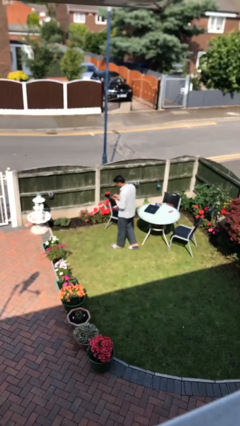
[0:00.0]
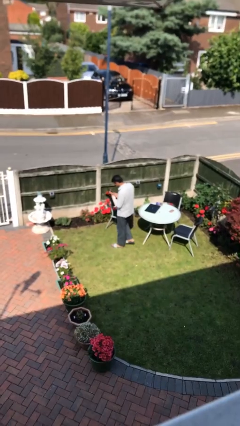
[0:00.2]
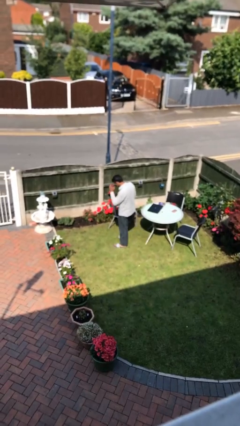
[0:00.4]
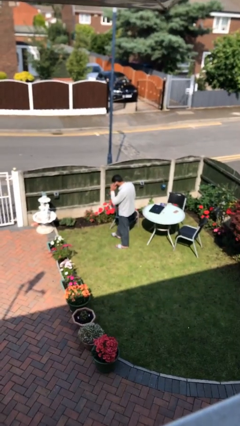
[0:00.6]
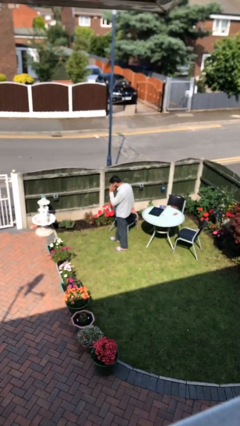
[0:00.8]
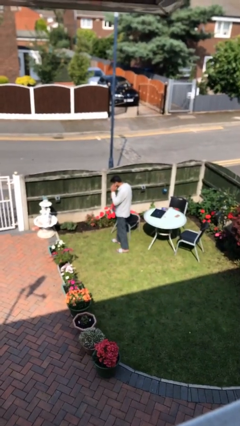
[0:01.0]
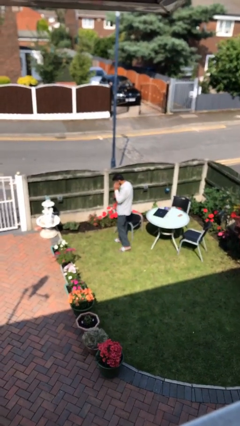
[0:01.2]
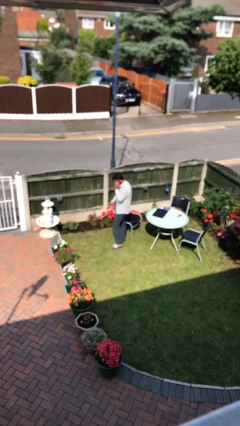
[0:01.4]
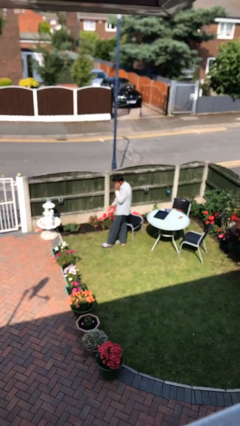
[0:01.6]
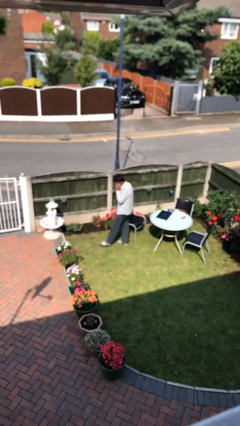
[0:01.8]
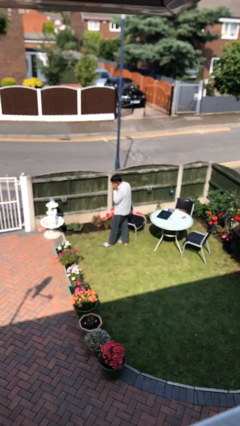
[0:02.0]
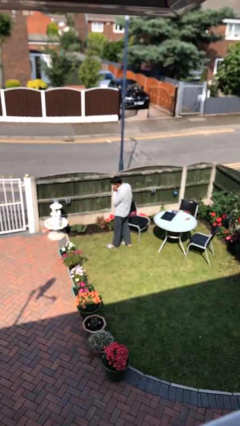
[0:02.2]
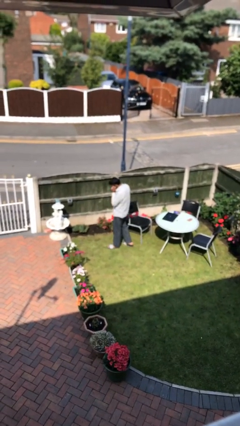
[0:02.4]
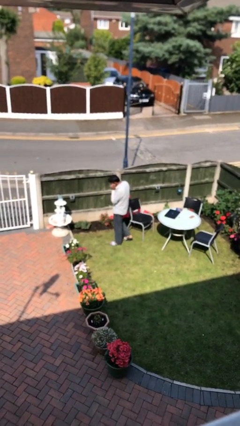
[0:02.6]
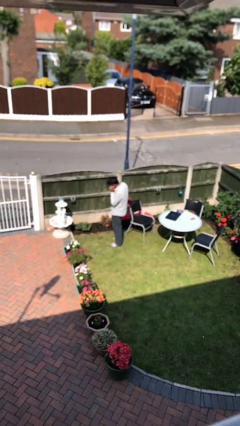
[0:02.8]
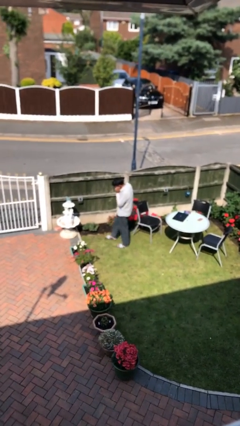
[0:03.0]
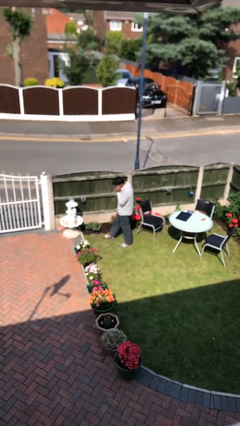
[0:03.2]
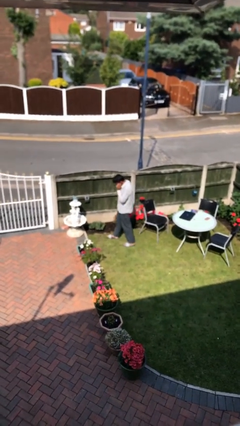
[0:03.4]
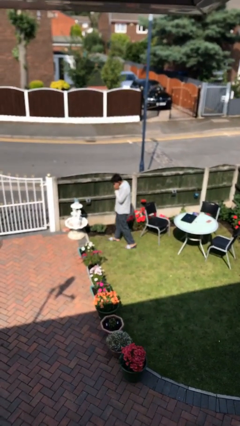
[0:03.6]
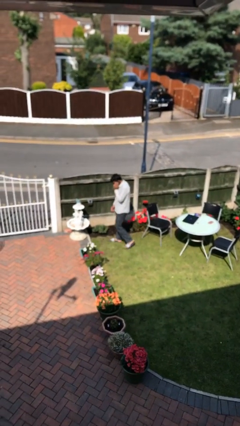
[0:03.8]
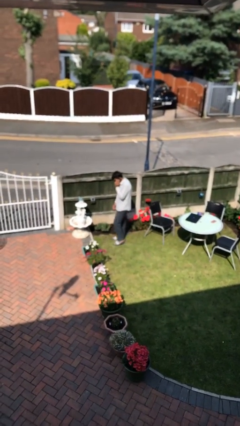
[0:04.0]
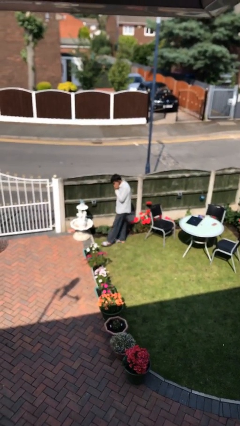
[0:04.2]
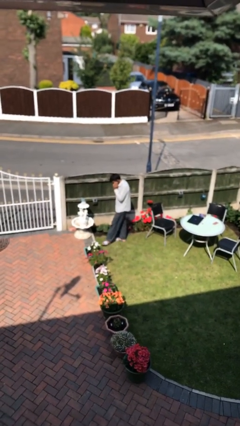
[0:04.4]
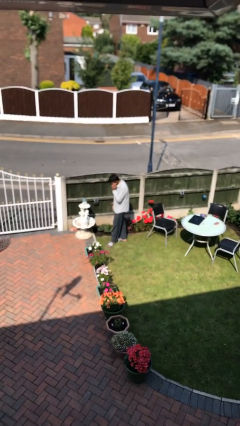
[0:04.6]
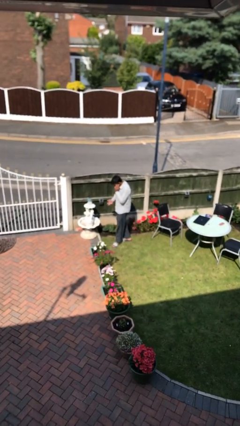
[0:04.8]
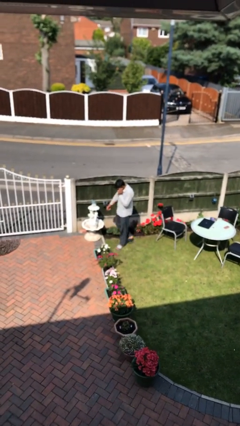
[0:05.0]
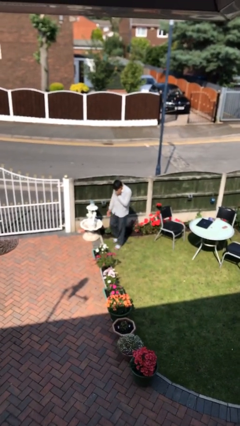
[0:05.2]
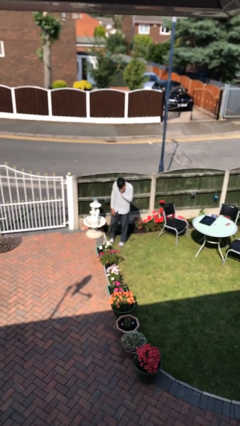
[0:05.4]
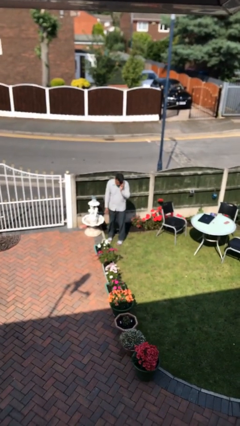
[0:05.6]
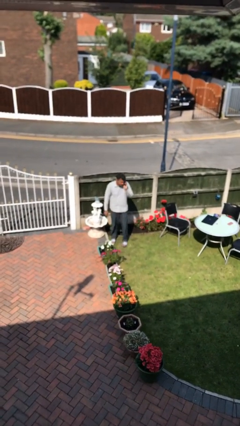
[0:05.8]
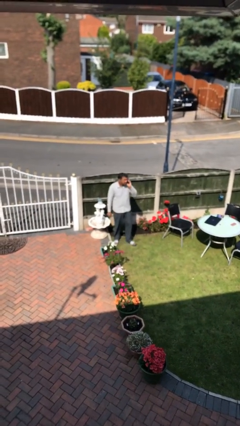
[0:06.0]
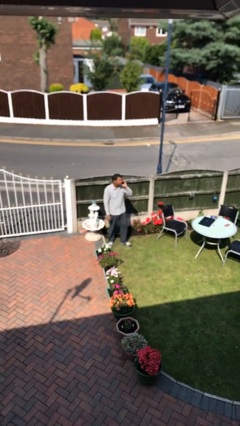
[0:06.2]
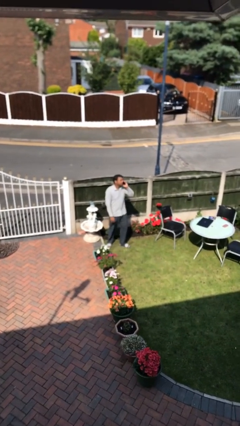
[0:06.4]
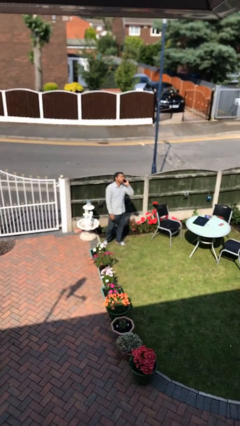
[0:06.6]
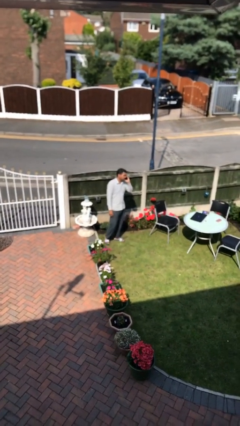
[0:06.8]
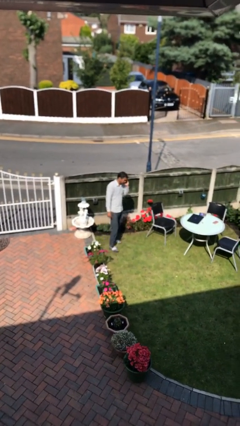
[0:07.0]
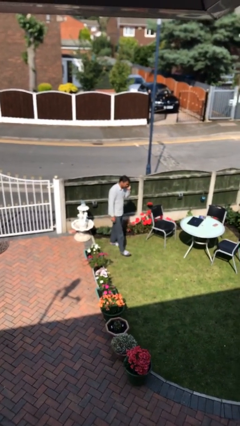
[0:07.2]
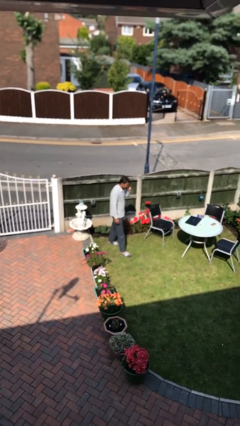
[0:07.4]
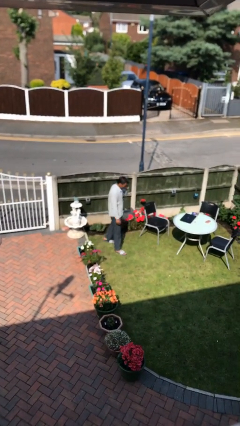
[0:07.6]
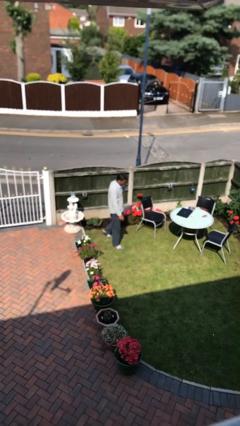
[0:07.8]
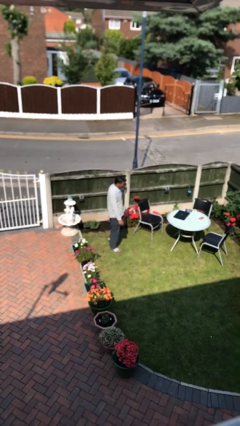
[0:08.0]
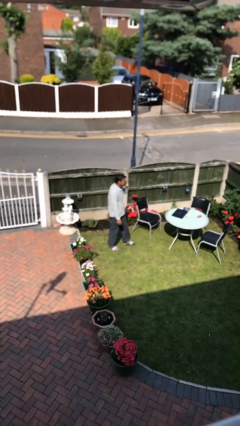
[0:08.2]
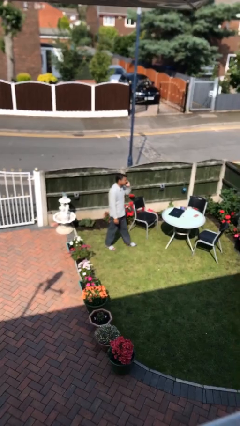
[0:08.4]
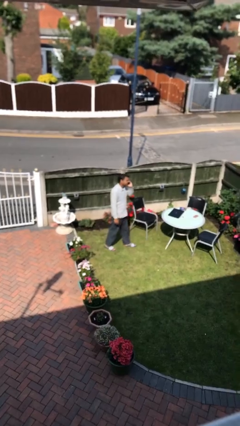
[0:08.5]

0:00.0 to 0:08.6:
person talks on phone

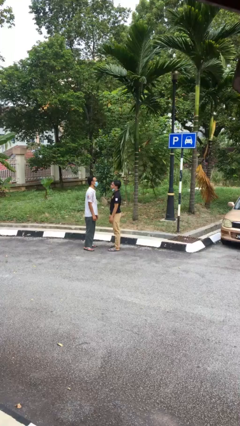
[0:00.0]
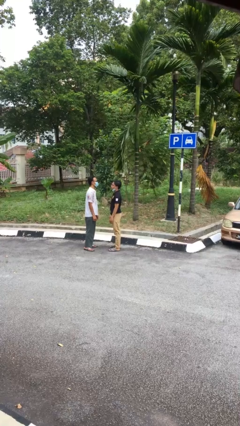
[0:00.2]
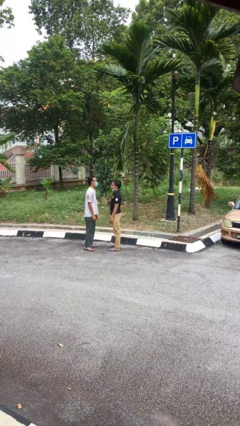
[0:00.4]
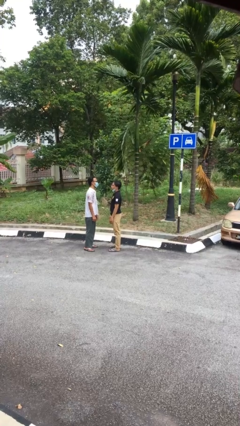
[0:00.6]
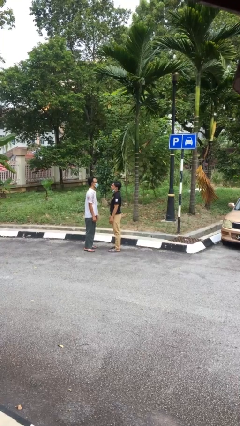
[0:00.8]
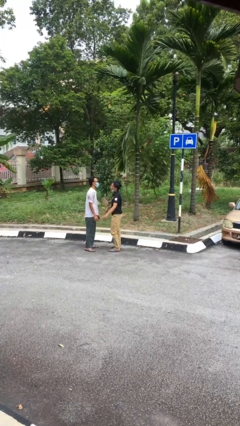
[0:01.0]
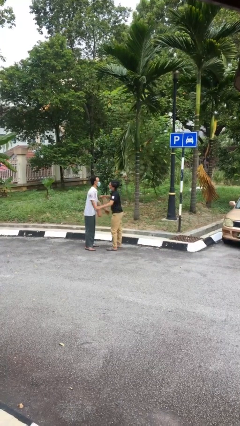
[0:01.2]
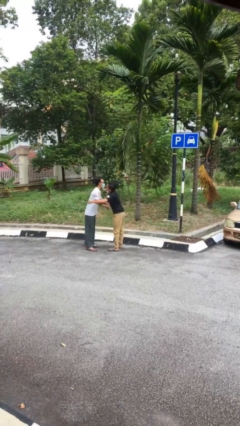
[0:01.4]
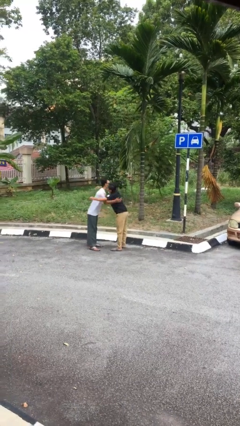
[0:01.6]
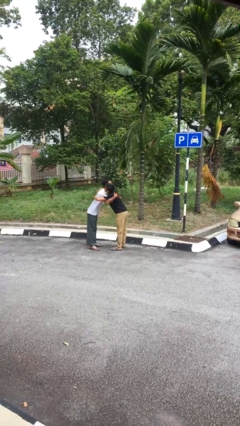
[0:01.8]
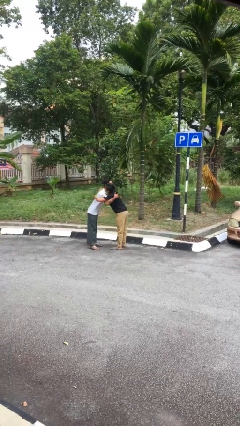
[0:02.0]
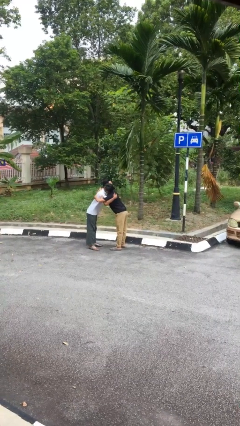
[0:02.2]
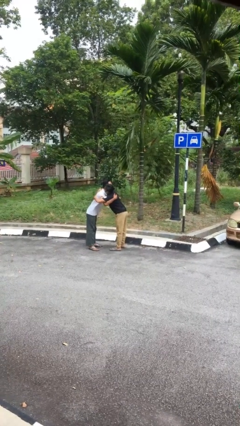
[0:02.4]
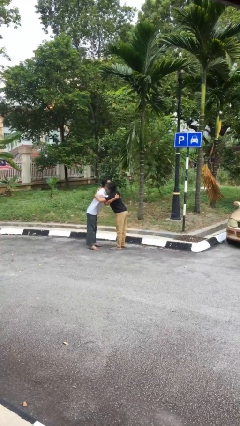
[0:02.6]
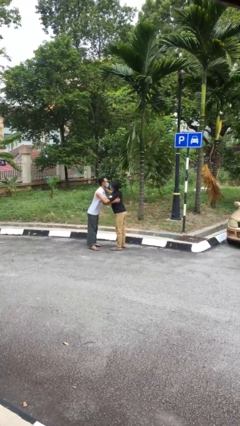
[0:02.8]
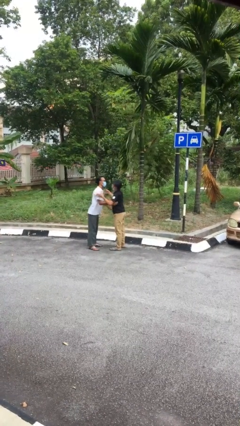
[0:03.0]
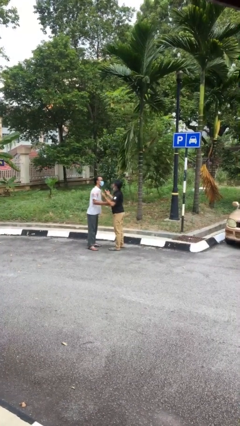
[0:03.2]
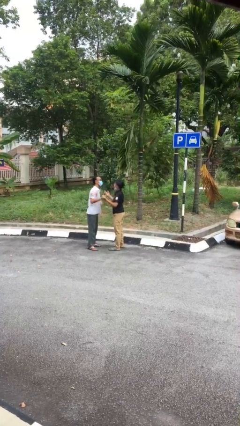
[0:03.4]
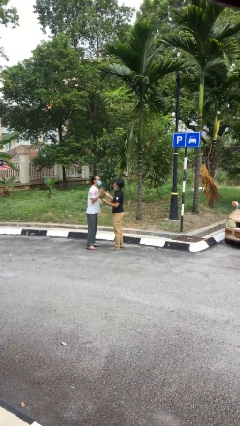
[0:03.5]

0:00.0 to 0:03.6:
person embraces person

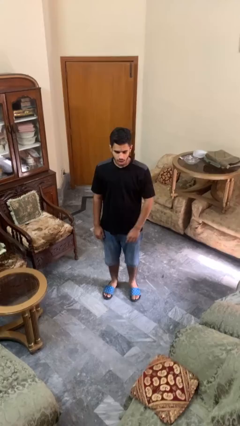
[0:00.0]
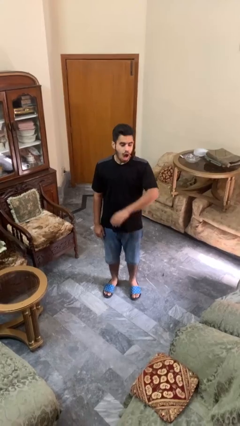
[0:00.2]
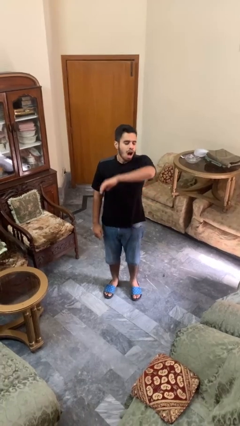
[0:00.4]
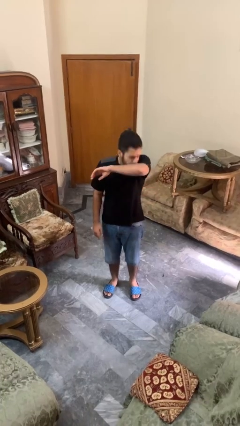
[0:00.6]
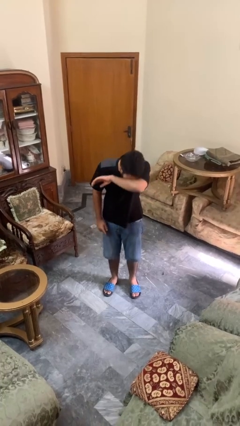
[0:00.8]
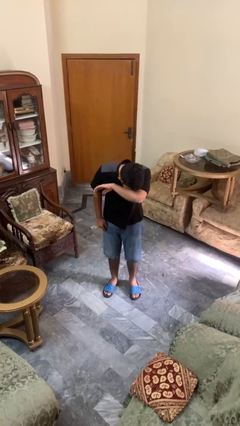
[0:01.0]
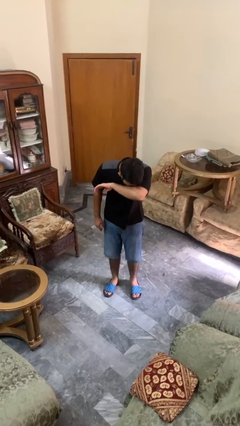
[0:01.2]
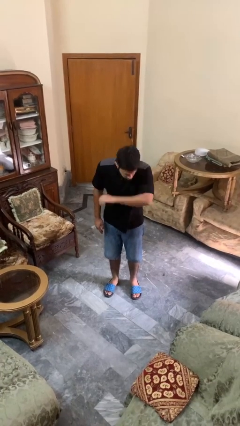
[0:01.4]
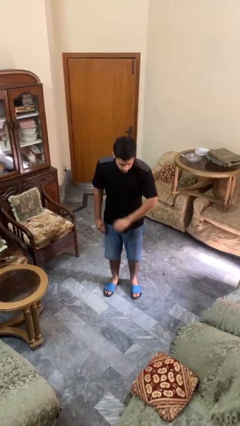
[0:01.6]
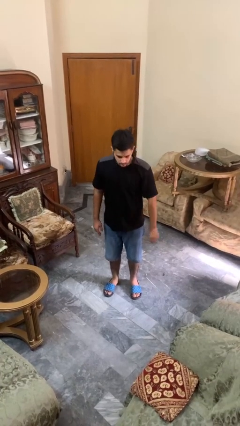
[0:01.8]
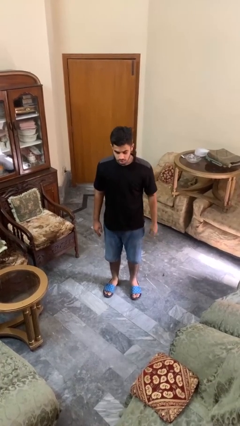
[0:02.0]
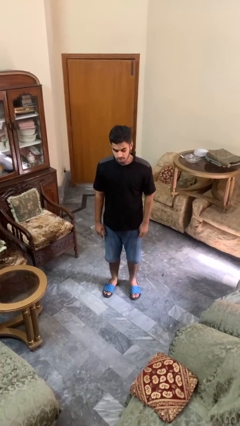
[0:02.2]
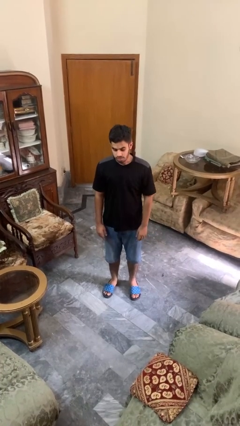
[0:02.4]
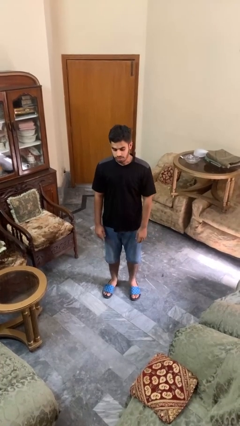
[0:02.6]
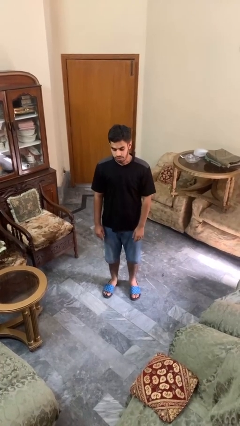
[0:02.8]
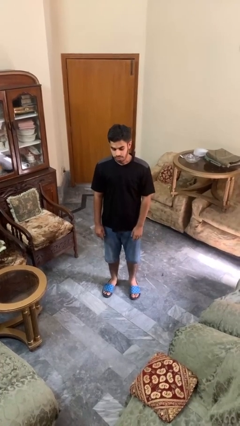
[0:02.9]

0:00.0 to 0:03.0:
person sneezes into arm

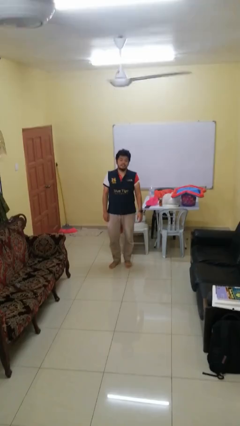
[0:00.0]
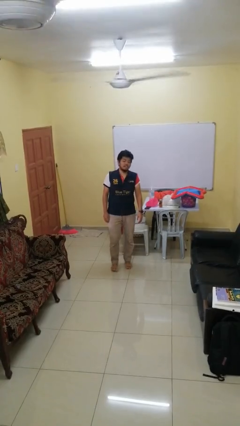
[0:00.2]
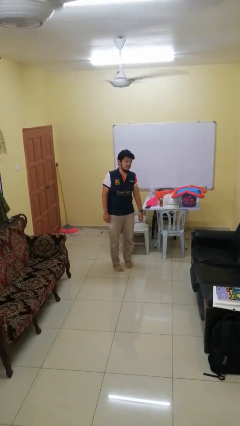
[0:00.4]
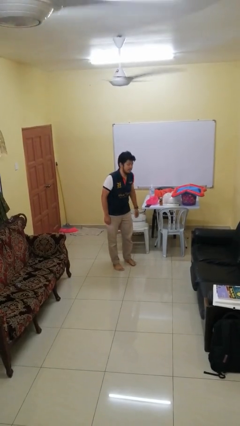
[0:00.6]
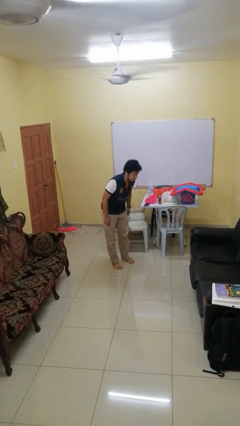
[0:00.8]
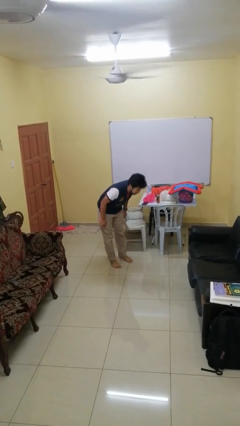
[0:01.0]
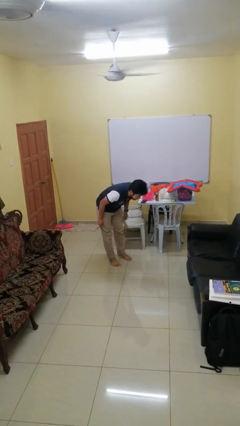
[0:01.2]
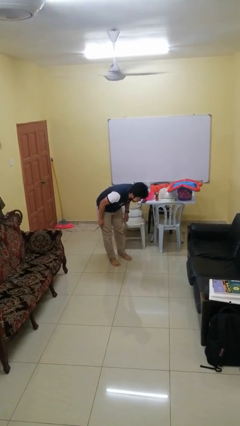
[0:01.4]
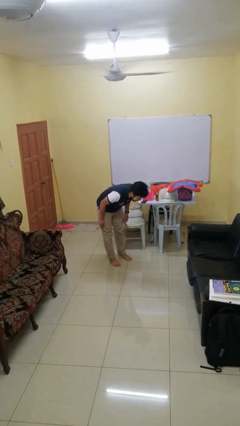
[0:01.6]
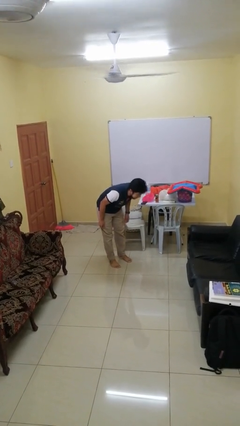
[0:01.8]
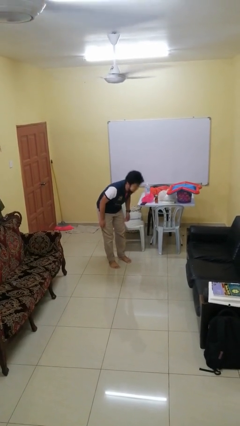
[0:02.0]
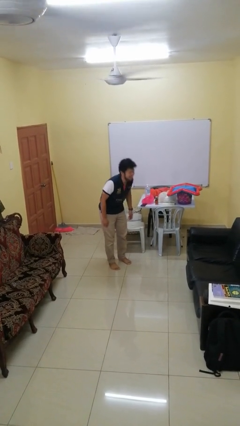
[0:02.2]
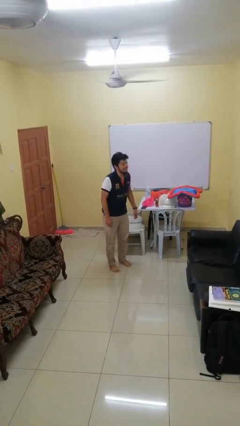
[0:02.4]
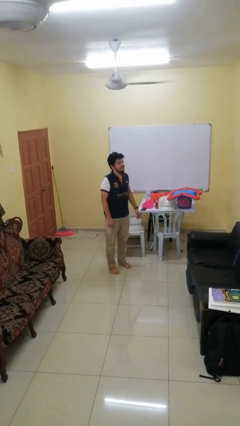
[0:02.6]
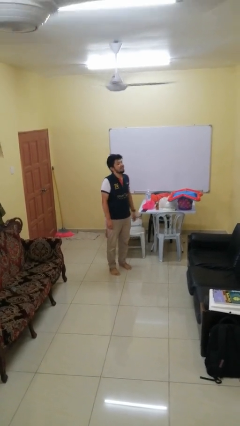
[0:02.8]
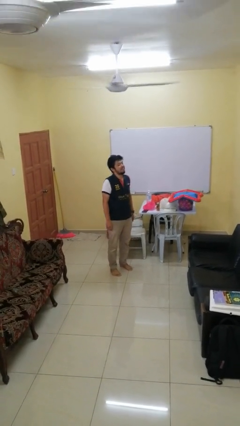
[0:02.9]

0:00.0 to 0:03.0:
person bows
